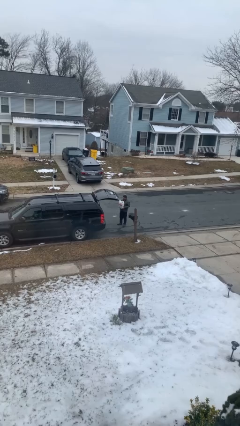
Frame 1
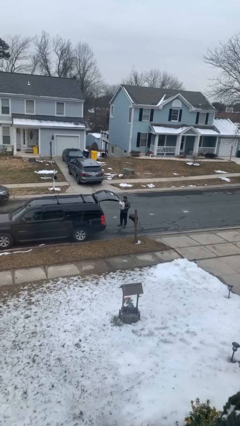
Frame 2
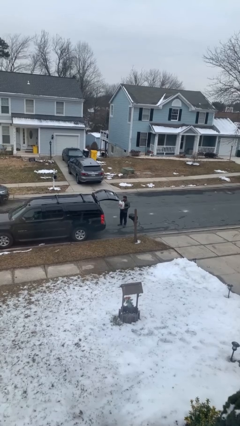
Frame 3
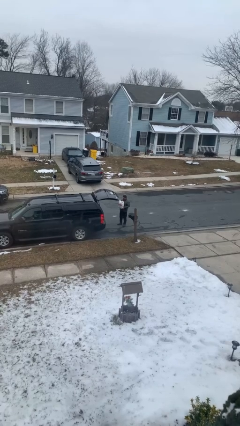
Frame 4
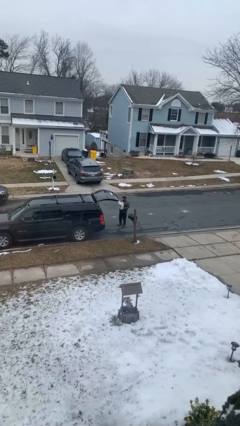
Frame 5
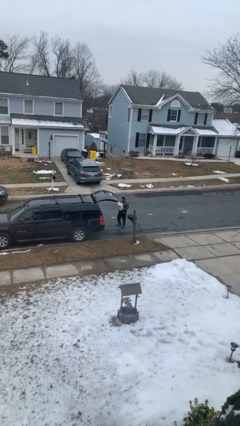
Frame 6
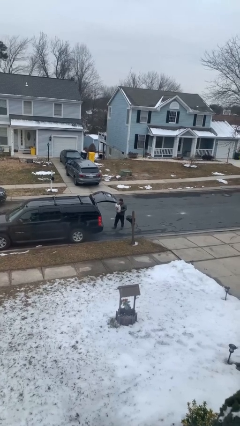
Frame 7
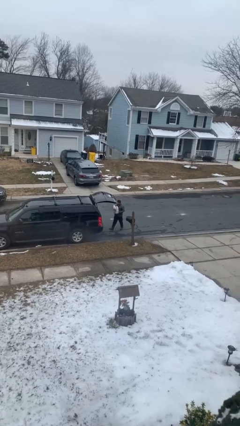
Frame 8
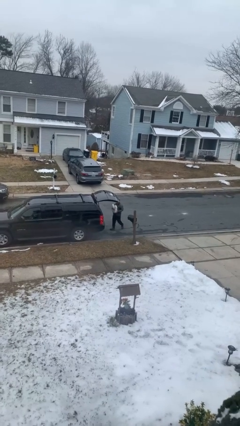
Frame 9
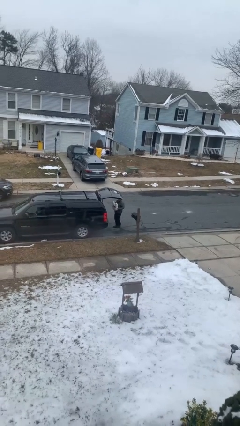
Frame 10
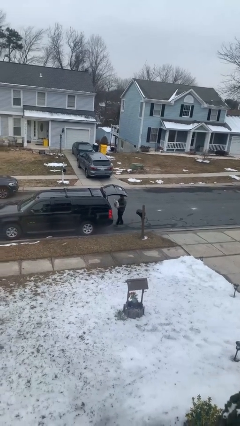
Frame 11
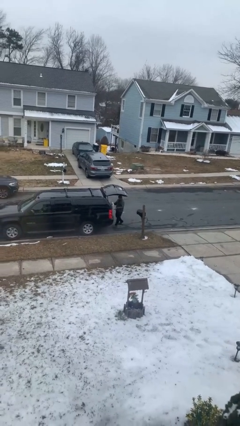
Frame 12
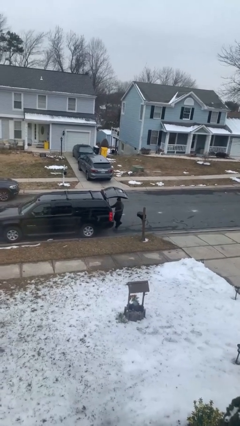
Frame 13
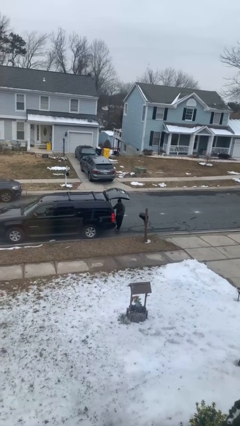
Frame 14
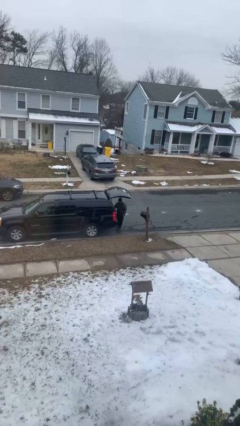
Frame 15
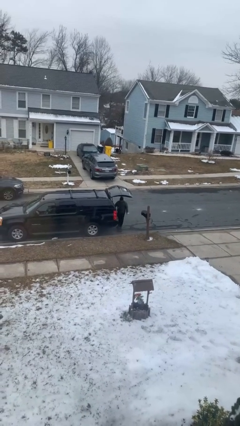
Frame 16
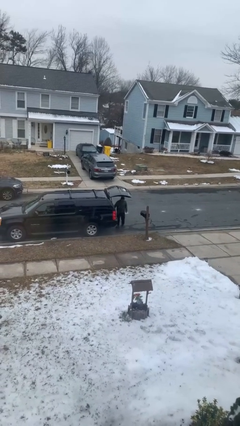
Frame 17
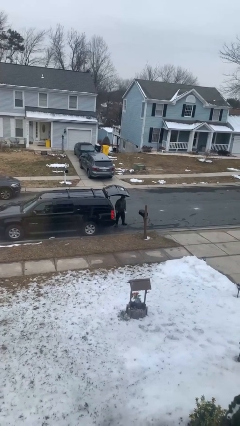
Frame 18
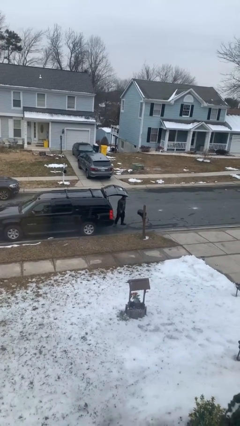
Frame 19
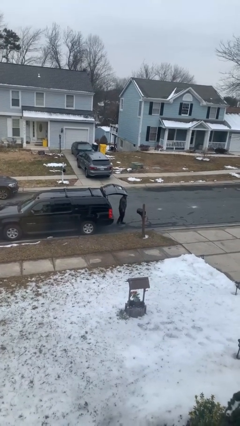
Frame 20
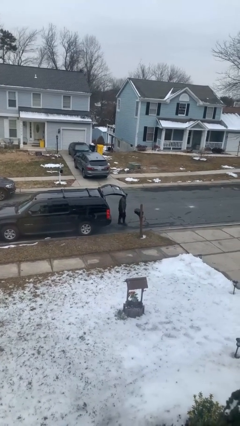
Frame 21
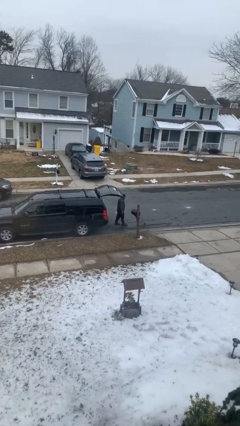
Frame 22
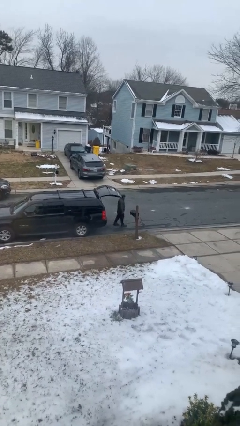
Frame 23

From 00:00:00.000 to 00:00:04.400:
person loads car

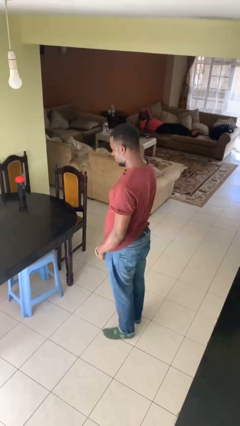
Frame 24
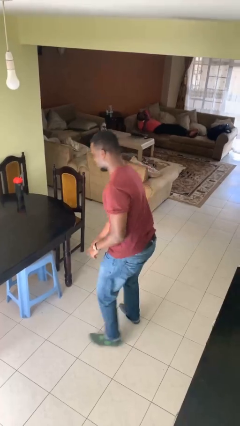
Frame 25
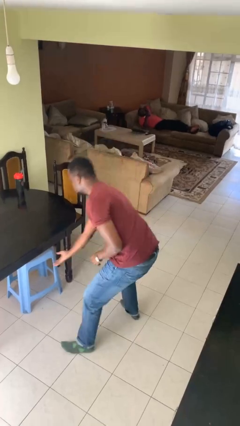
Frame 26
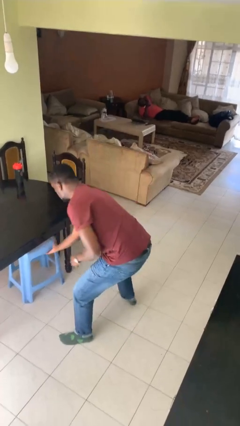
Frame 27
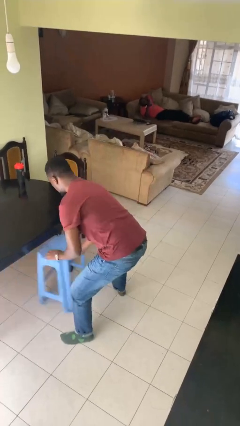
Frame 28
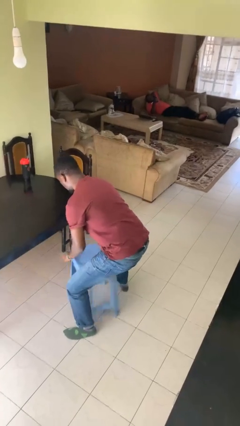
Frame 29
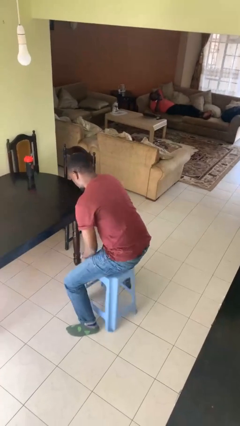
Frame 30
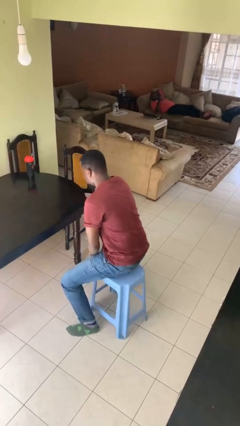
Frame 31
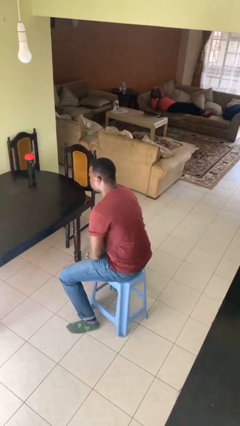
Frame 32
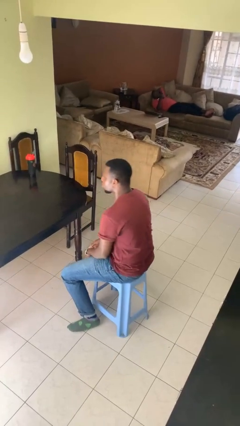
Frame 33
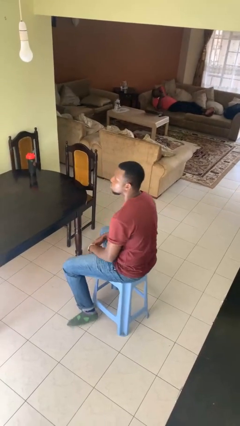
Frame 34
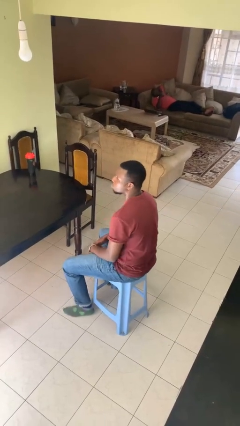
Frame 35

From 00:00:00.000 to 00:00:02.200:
person sits down

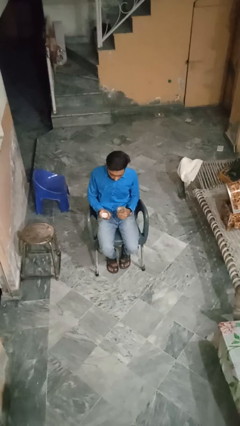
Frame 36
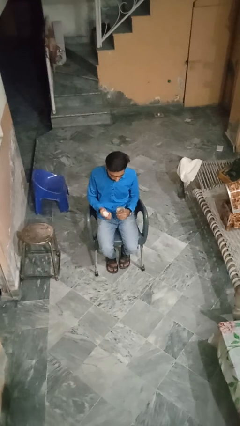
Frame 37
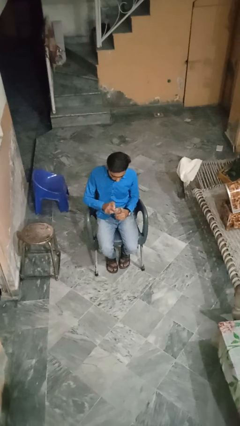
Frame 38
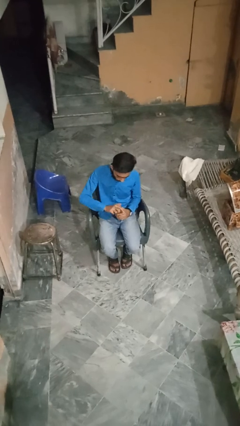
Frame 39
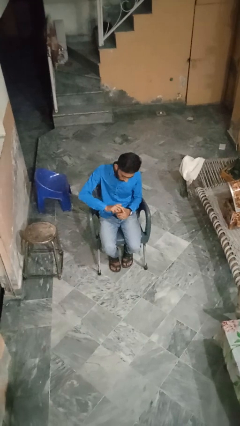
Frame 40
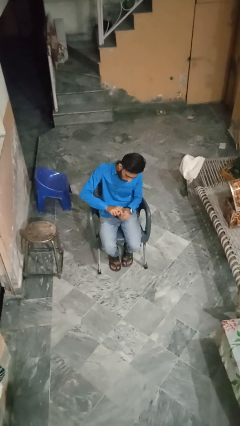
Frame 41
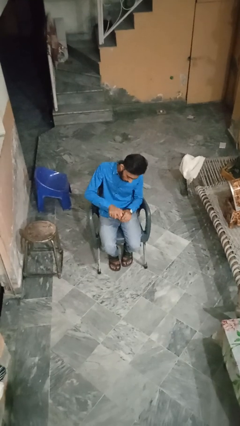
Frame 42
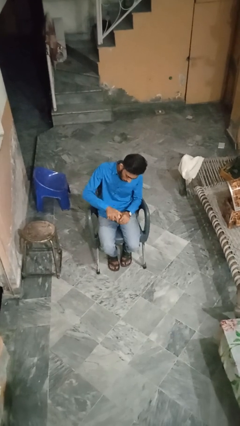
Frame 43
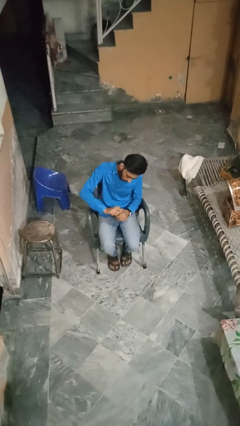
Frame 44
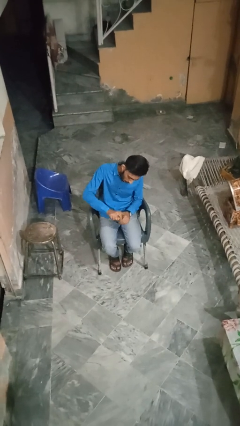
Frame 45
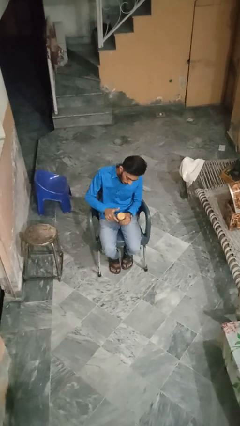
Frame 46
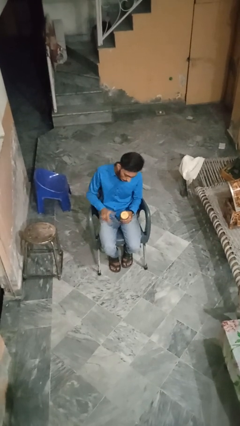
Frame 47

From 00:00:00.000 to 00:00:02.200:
person closes jar

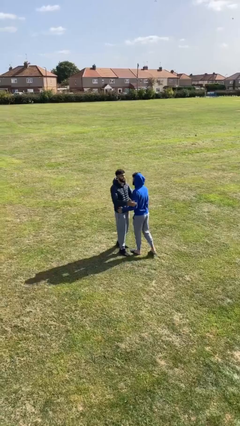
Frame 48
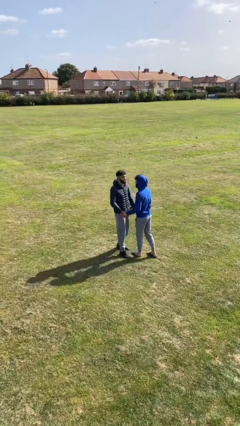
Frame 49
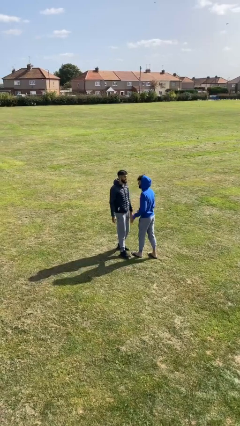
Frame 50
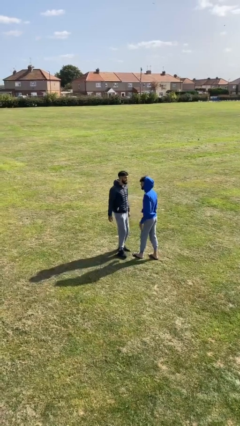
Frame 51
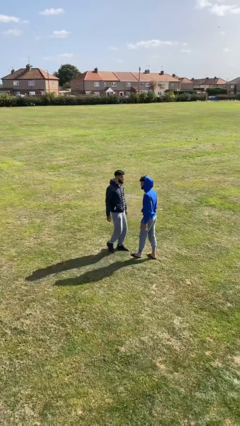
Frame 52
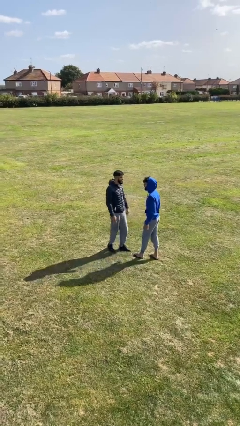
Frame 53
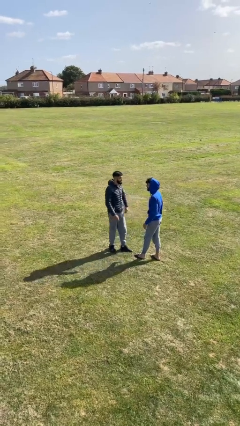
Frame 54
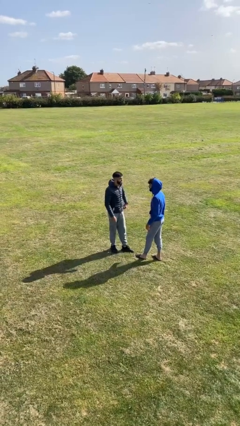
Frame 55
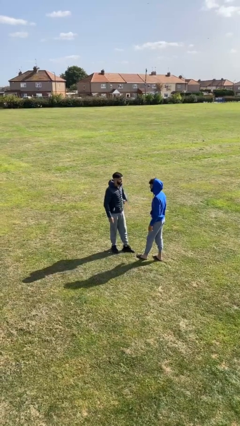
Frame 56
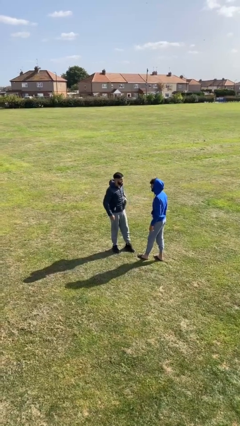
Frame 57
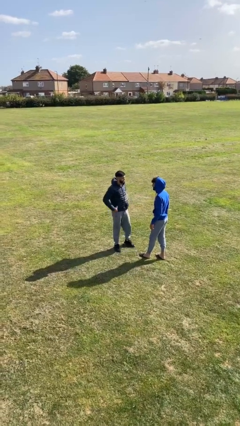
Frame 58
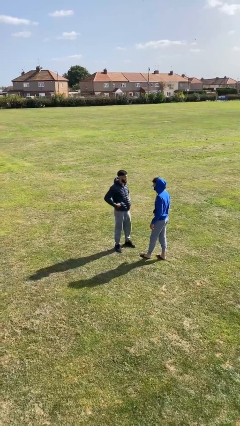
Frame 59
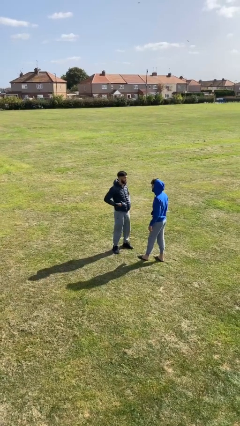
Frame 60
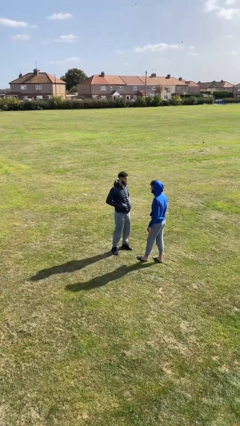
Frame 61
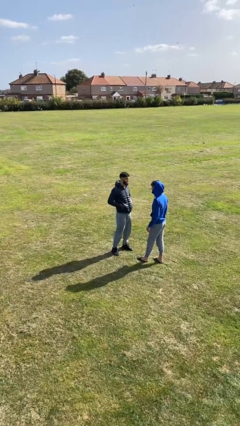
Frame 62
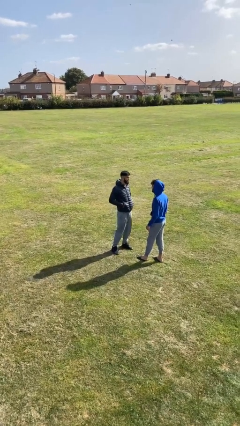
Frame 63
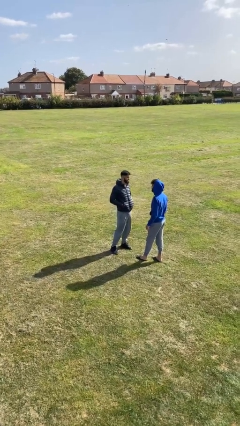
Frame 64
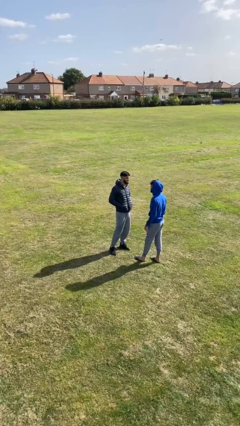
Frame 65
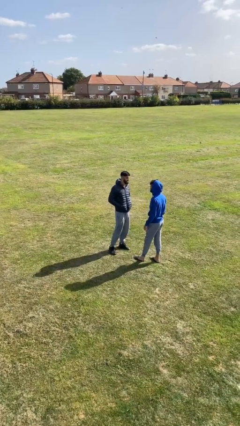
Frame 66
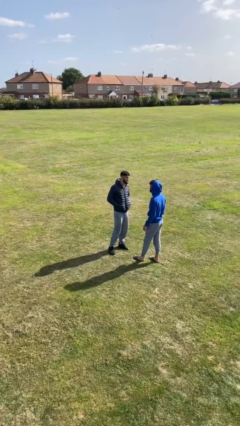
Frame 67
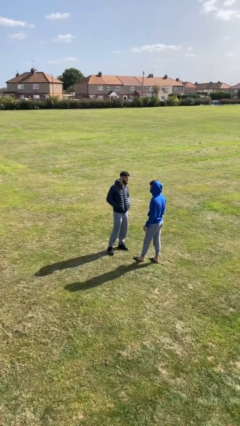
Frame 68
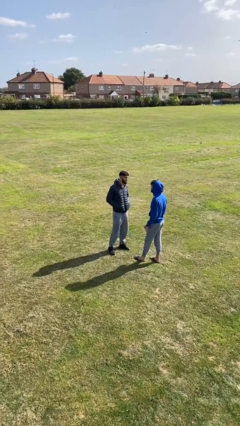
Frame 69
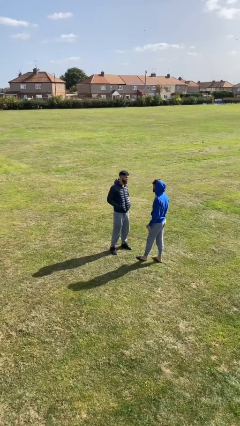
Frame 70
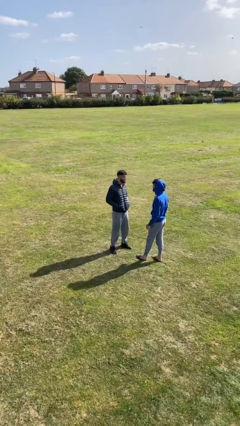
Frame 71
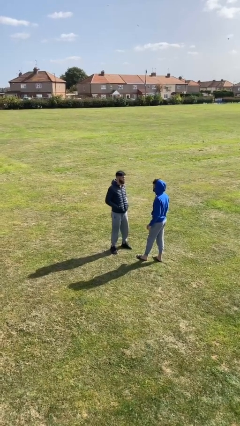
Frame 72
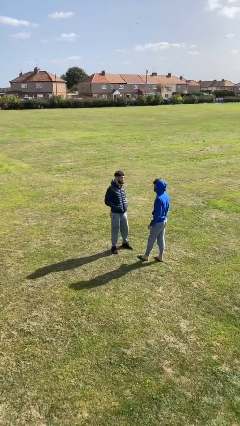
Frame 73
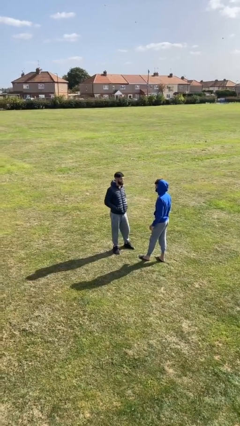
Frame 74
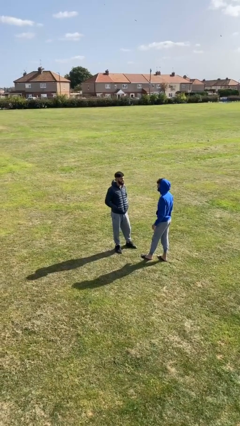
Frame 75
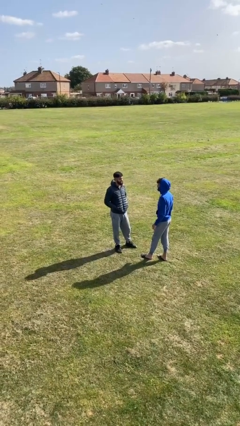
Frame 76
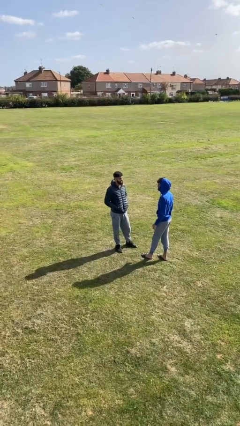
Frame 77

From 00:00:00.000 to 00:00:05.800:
person talks to person

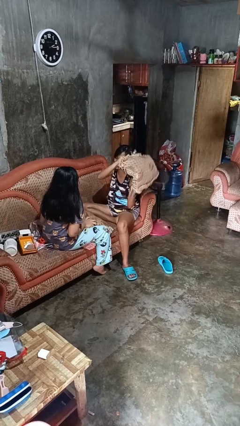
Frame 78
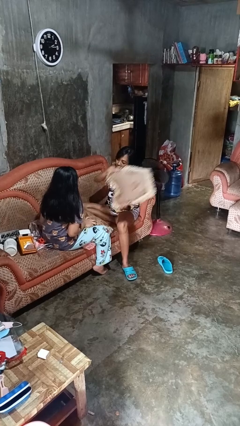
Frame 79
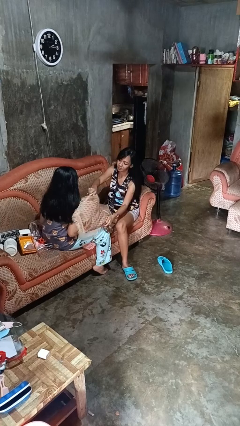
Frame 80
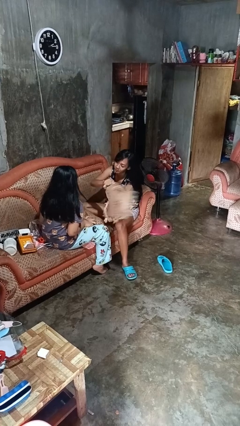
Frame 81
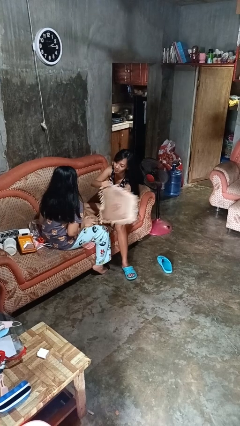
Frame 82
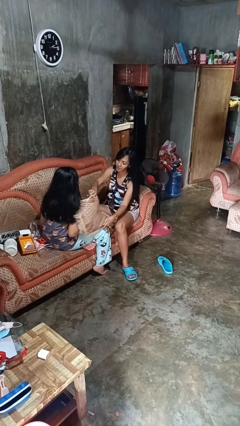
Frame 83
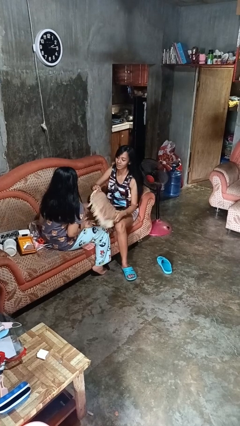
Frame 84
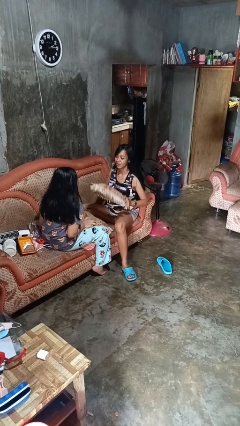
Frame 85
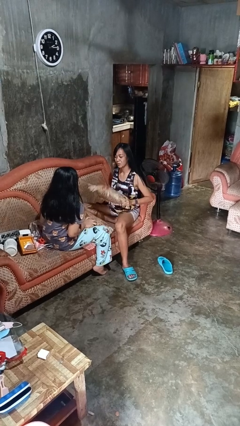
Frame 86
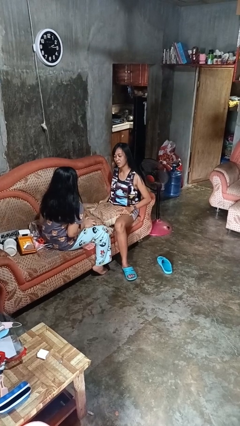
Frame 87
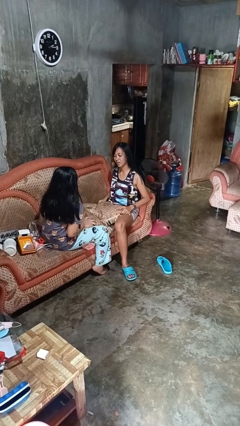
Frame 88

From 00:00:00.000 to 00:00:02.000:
person hits person with pillow

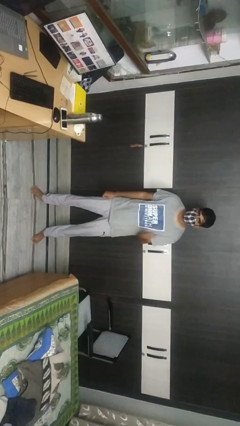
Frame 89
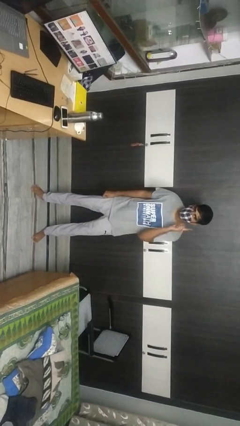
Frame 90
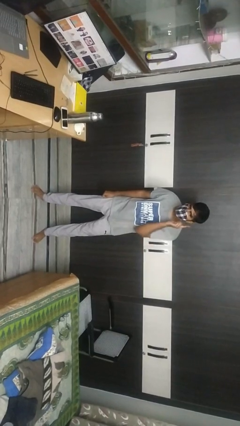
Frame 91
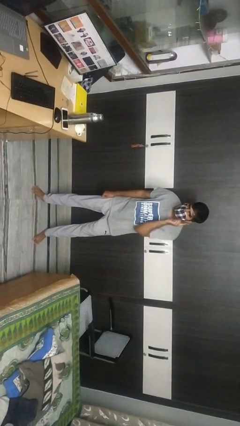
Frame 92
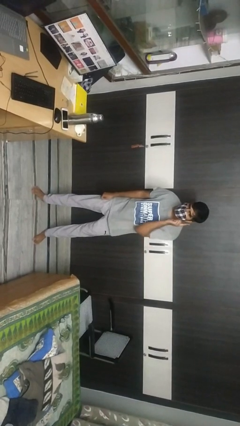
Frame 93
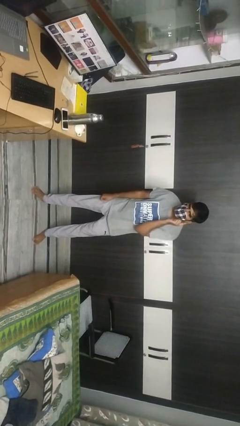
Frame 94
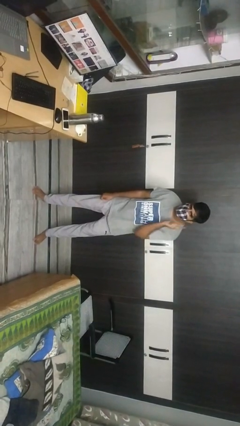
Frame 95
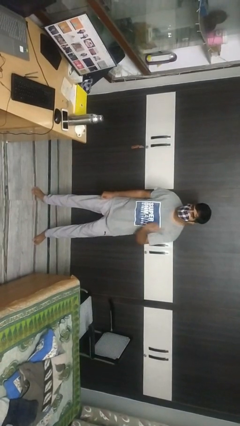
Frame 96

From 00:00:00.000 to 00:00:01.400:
person gestures listen closely
